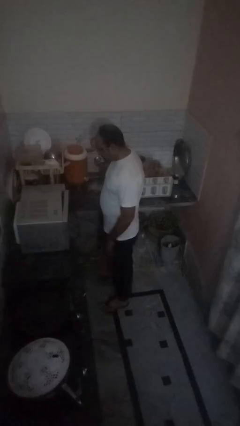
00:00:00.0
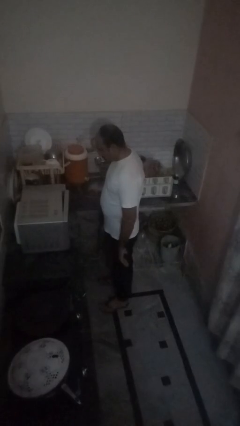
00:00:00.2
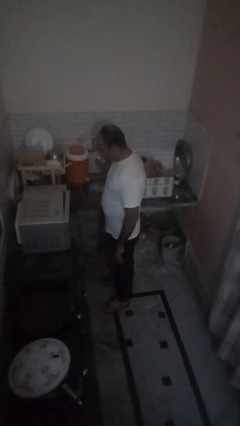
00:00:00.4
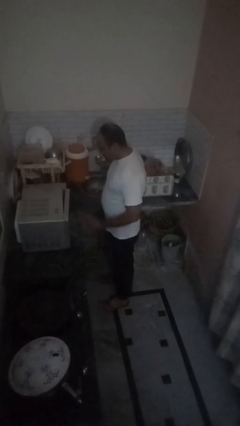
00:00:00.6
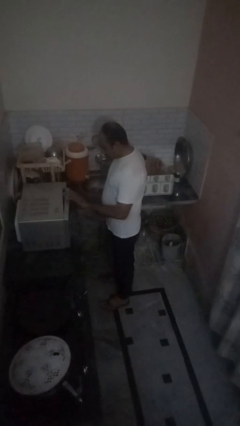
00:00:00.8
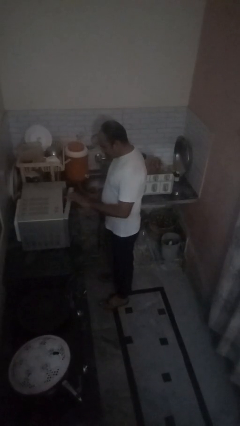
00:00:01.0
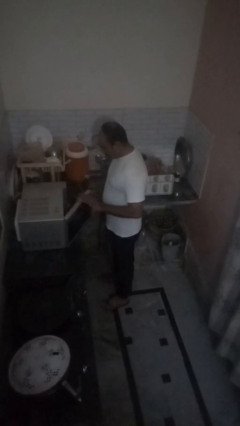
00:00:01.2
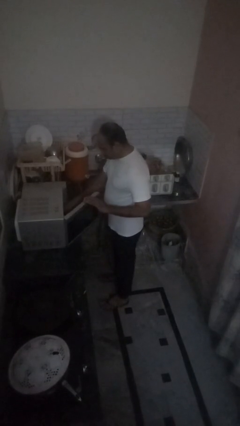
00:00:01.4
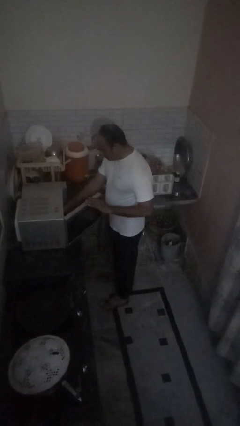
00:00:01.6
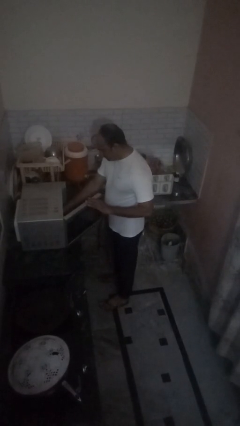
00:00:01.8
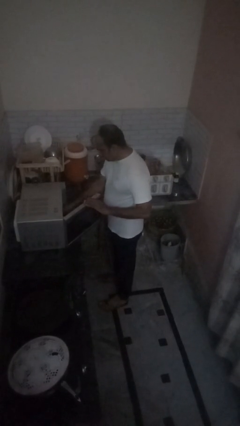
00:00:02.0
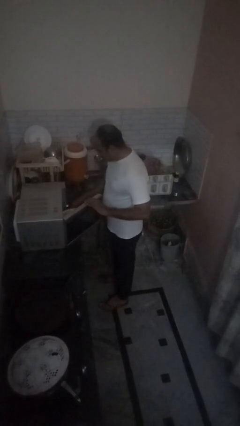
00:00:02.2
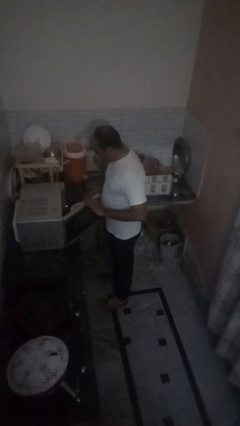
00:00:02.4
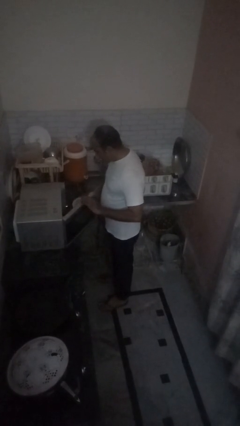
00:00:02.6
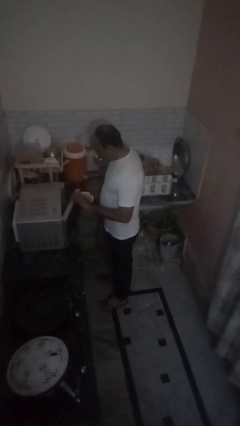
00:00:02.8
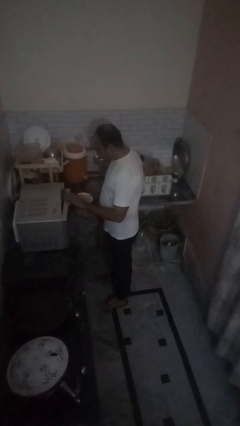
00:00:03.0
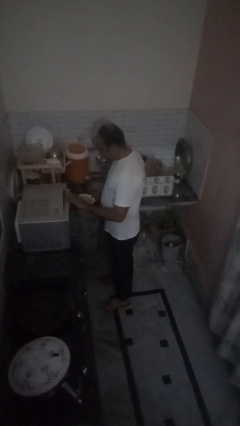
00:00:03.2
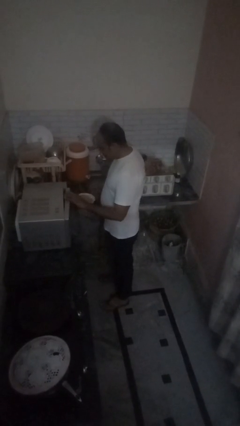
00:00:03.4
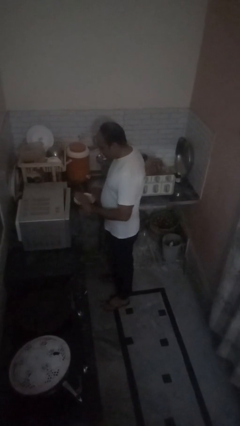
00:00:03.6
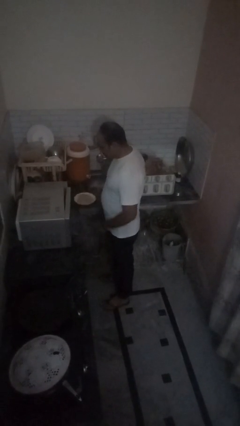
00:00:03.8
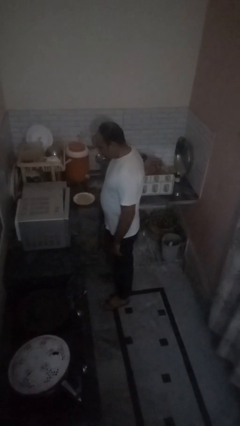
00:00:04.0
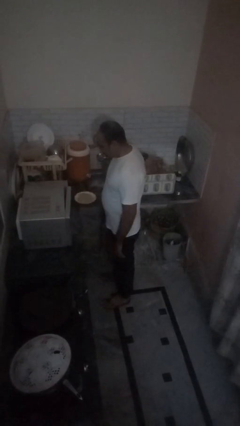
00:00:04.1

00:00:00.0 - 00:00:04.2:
person takes object from oven

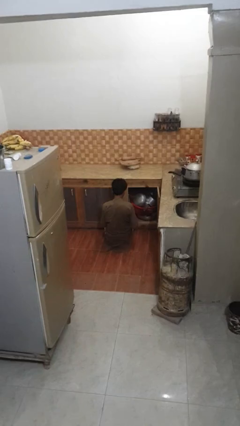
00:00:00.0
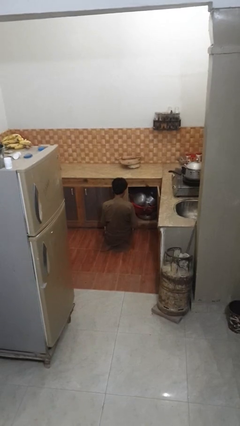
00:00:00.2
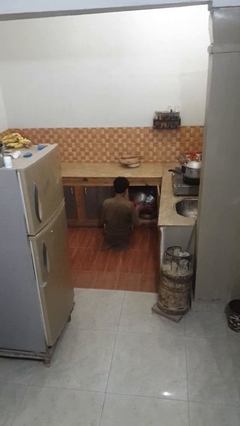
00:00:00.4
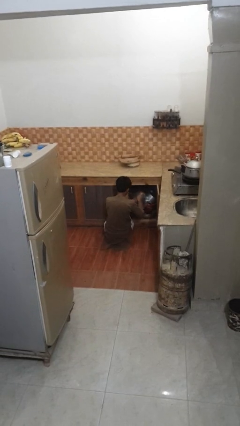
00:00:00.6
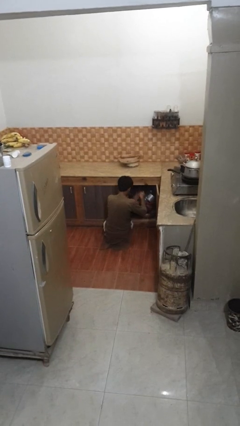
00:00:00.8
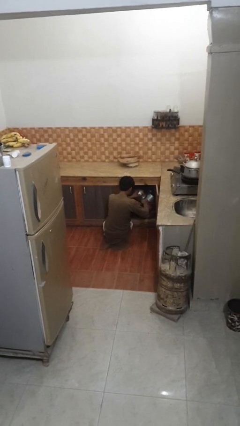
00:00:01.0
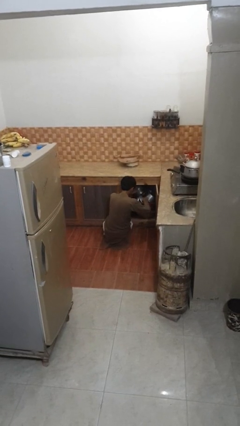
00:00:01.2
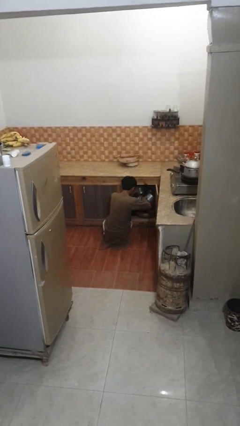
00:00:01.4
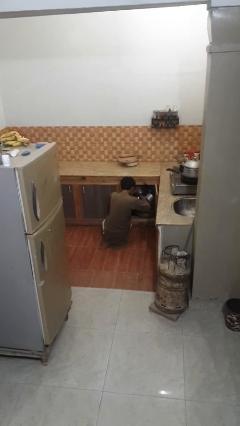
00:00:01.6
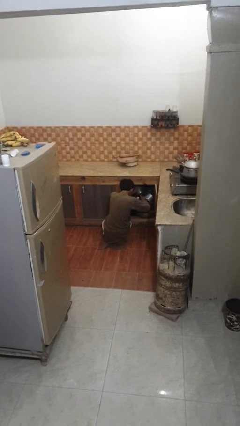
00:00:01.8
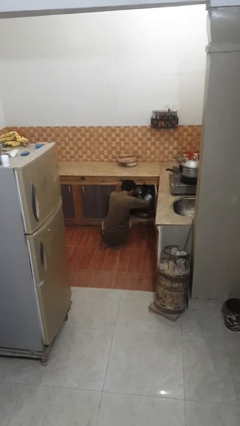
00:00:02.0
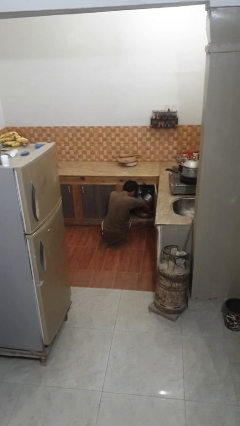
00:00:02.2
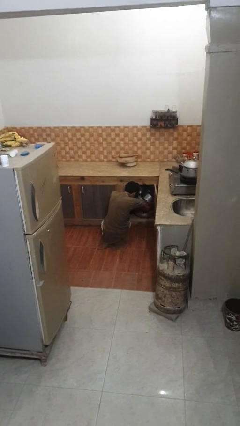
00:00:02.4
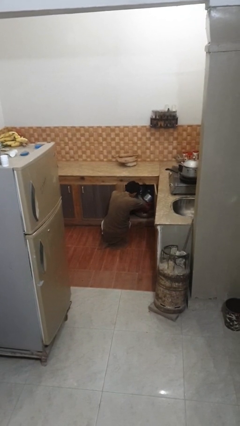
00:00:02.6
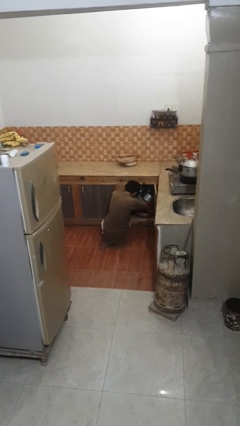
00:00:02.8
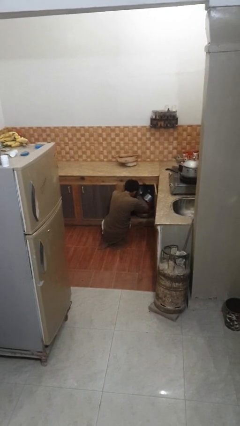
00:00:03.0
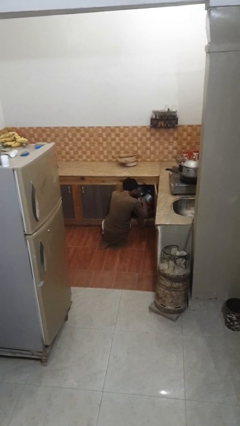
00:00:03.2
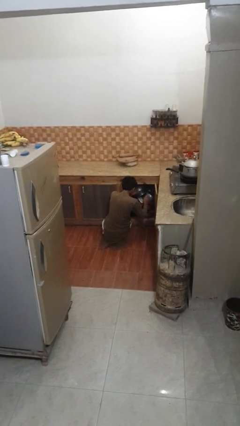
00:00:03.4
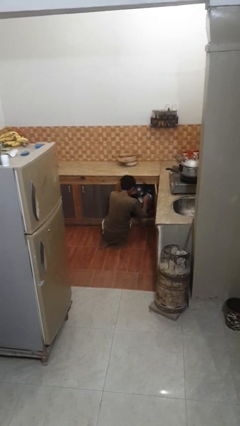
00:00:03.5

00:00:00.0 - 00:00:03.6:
person searches in kitchen drawer

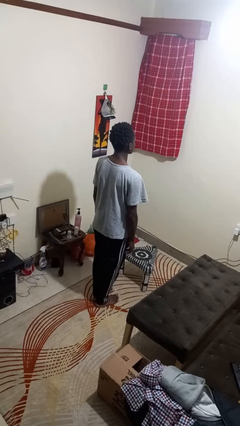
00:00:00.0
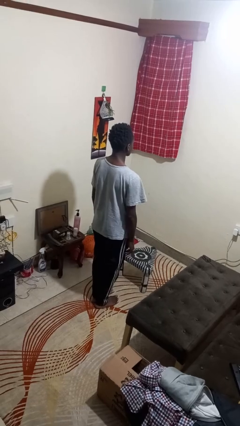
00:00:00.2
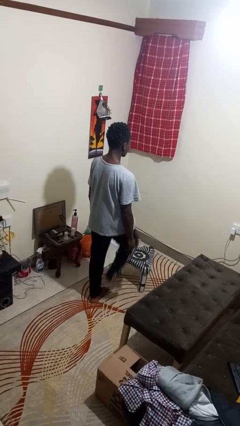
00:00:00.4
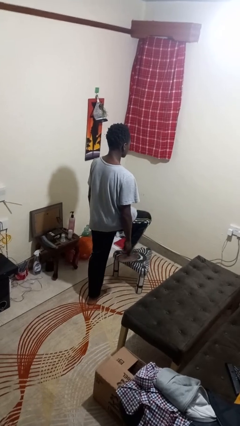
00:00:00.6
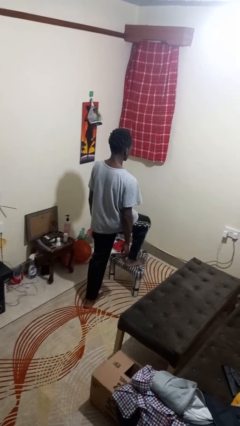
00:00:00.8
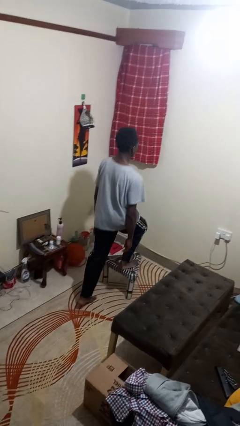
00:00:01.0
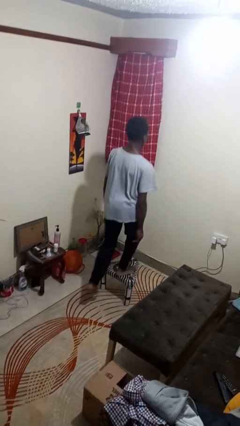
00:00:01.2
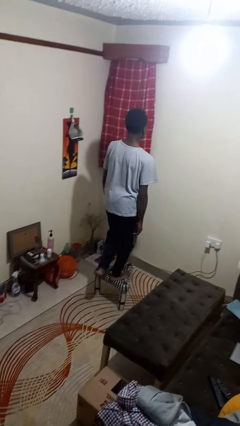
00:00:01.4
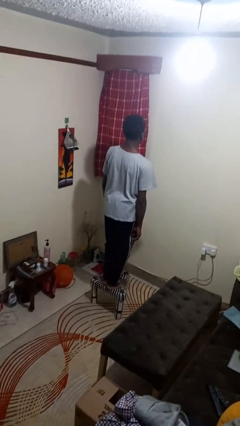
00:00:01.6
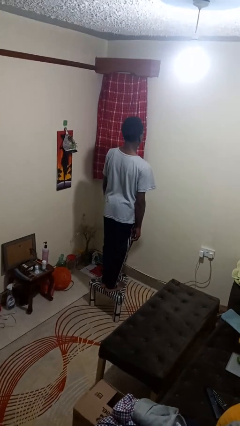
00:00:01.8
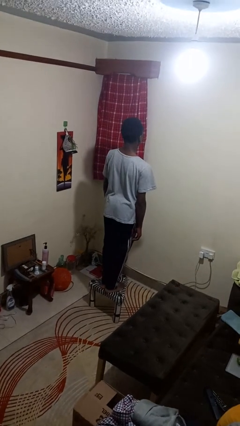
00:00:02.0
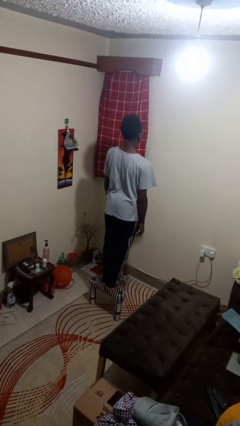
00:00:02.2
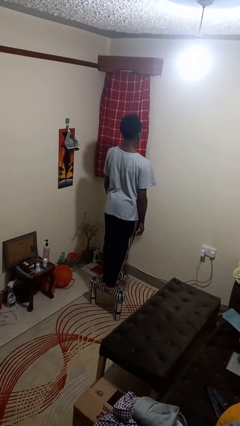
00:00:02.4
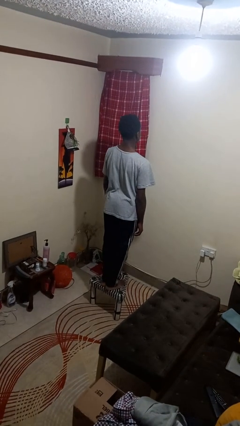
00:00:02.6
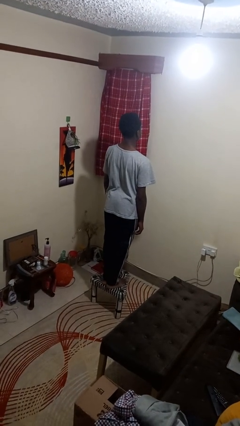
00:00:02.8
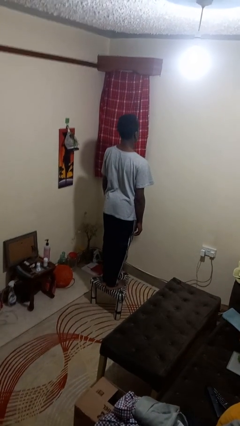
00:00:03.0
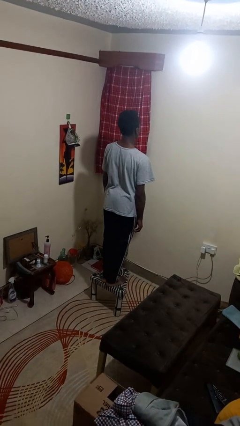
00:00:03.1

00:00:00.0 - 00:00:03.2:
person climbs on chair

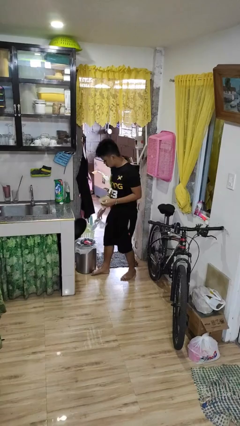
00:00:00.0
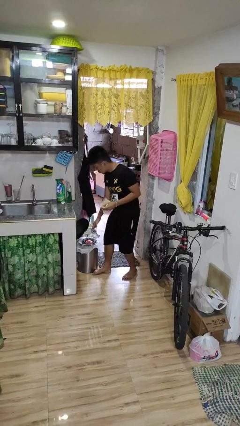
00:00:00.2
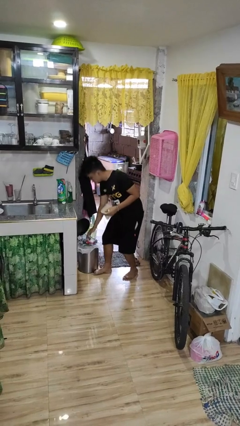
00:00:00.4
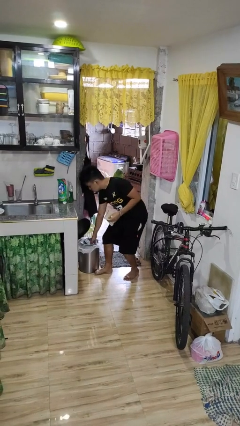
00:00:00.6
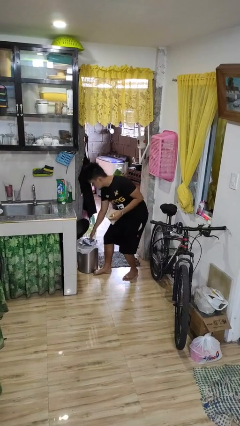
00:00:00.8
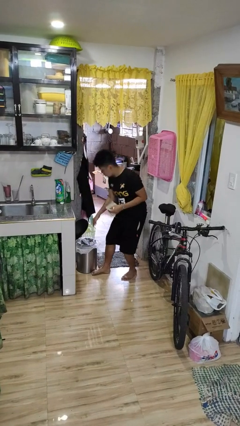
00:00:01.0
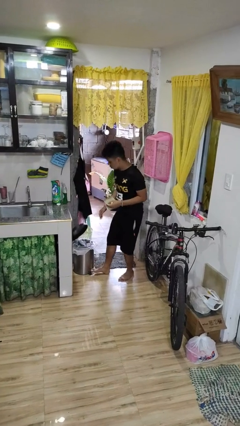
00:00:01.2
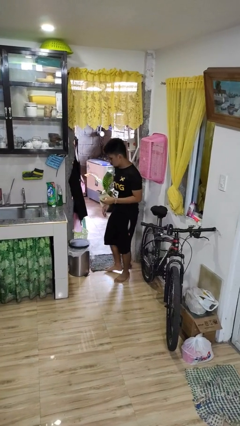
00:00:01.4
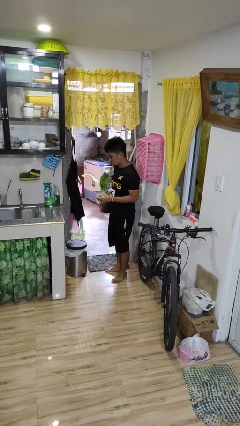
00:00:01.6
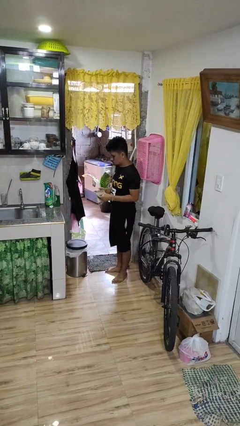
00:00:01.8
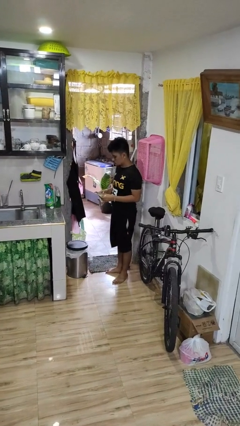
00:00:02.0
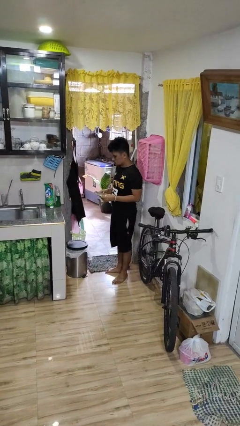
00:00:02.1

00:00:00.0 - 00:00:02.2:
person discards trash

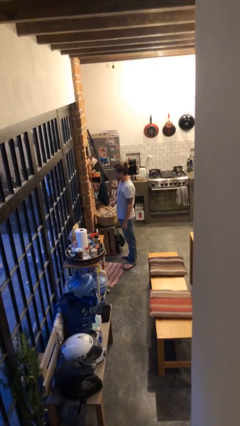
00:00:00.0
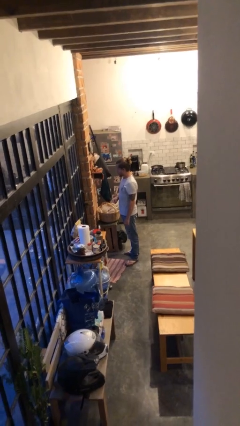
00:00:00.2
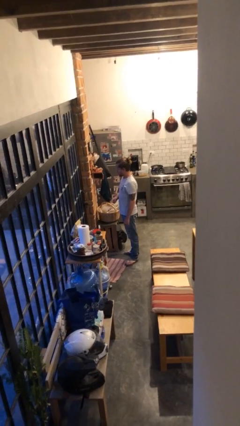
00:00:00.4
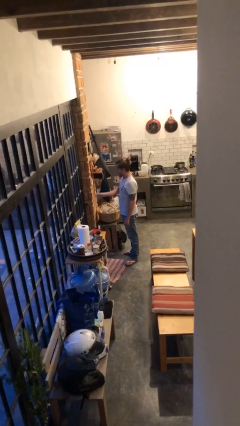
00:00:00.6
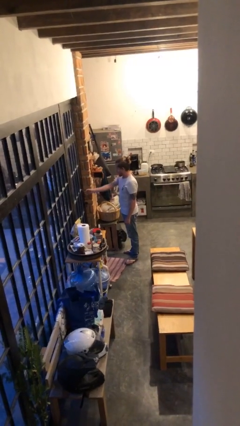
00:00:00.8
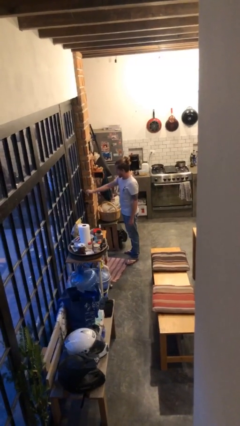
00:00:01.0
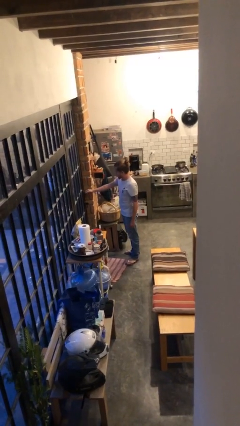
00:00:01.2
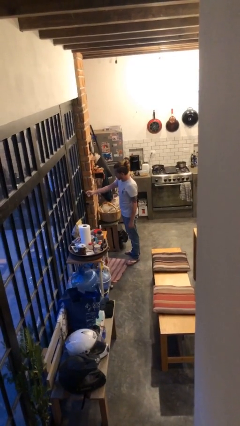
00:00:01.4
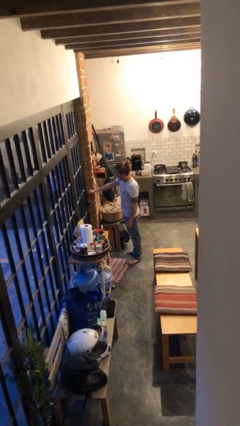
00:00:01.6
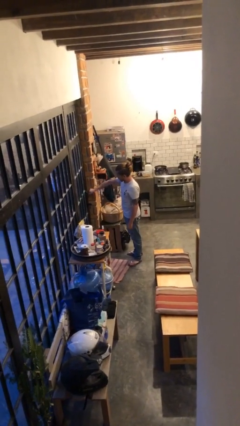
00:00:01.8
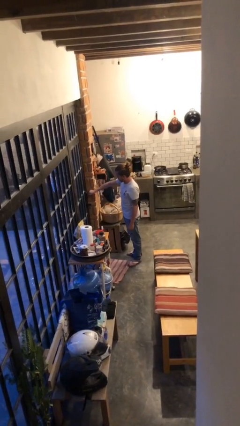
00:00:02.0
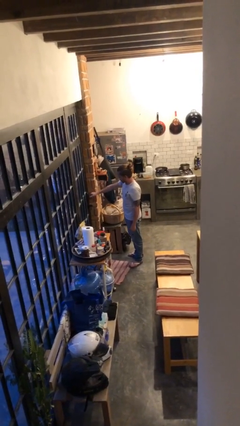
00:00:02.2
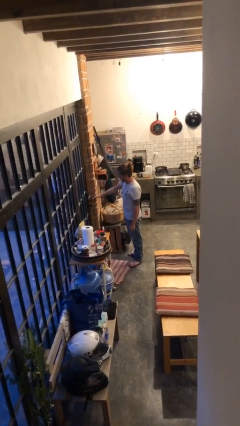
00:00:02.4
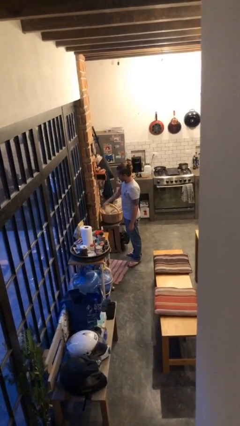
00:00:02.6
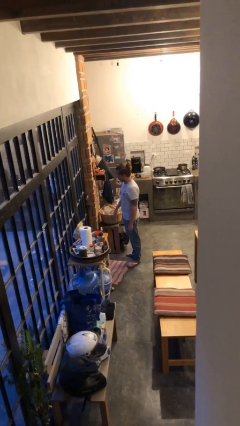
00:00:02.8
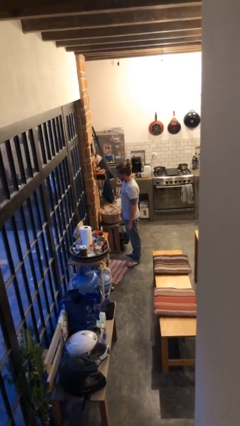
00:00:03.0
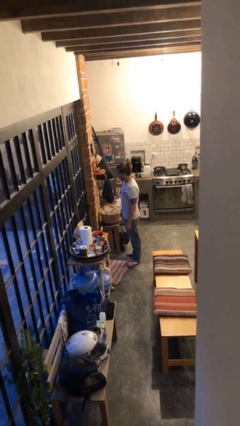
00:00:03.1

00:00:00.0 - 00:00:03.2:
person unlocks door with keys

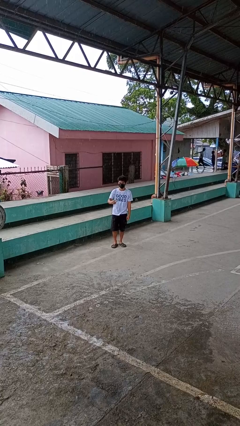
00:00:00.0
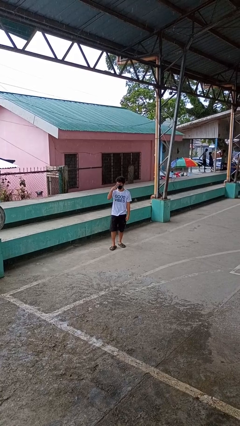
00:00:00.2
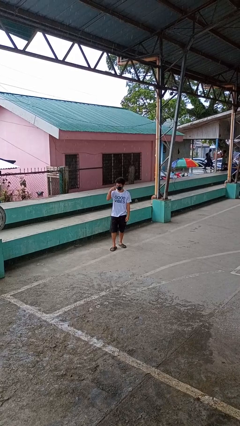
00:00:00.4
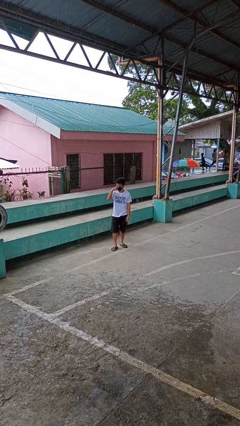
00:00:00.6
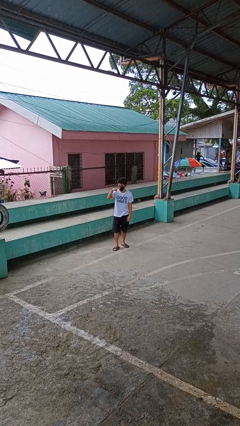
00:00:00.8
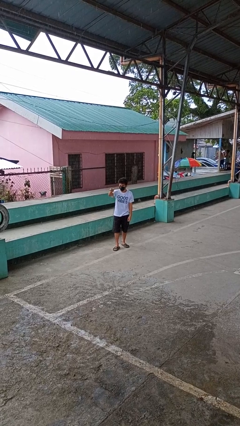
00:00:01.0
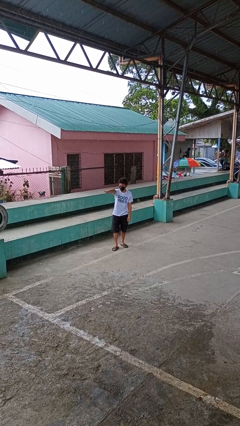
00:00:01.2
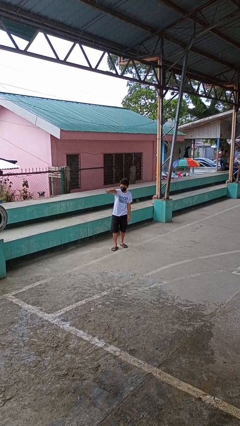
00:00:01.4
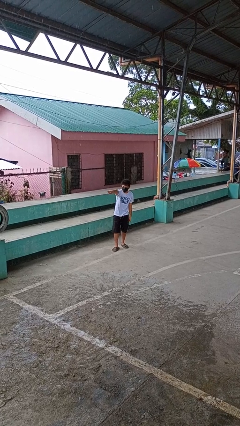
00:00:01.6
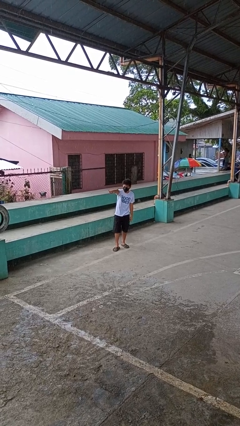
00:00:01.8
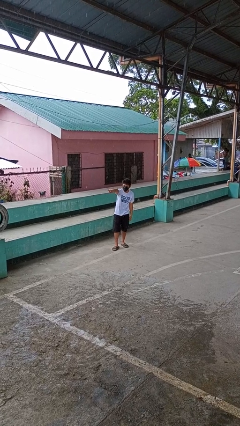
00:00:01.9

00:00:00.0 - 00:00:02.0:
person gestures watch closely
